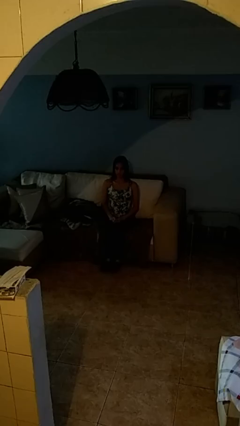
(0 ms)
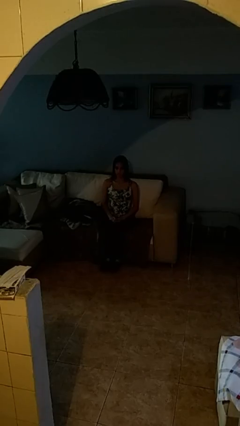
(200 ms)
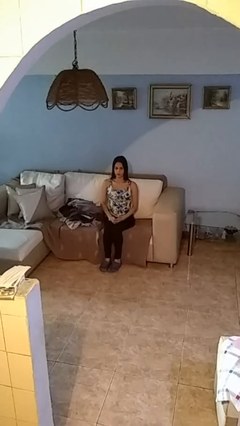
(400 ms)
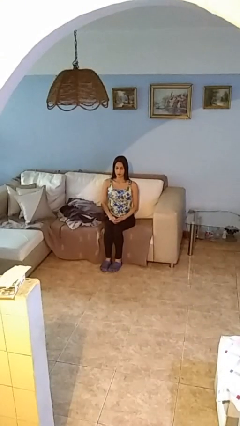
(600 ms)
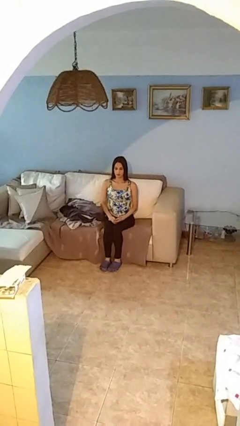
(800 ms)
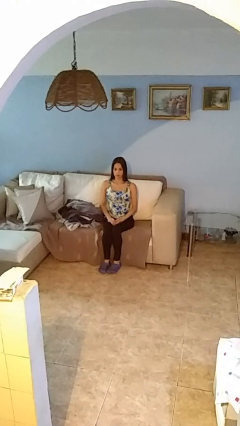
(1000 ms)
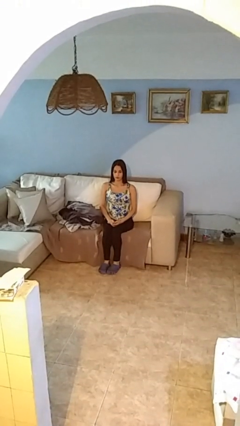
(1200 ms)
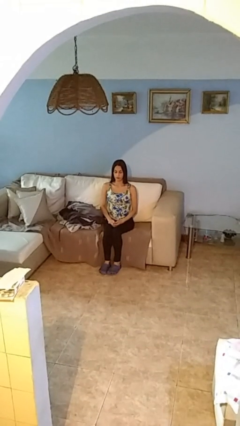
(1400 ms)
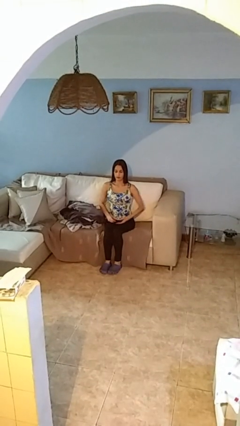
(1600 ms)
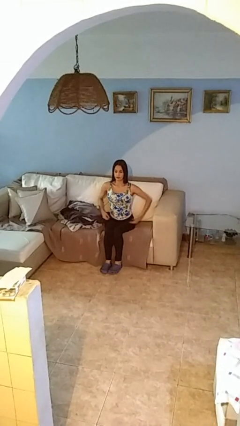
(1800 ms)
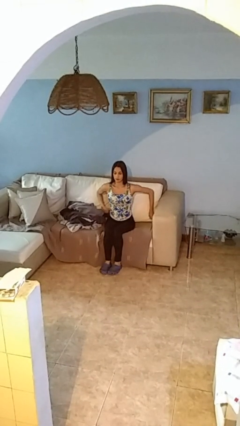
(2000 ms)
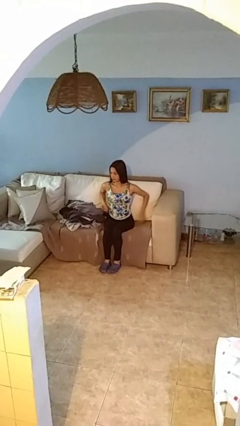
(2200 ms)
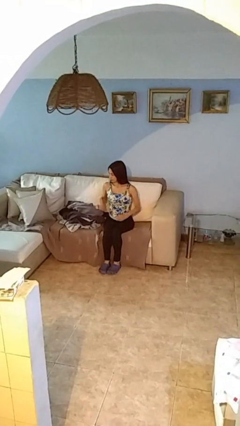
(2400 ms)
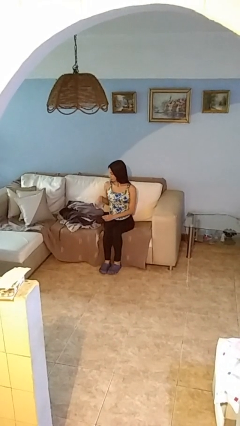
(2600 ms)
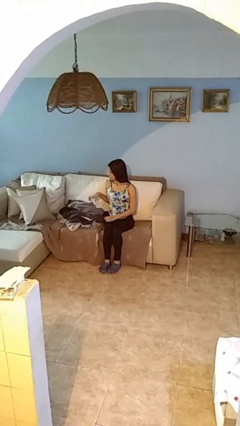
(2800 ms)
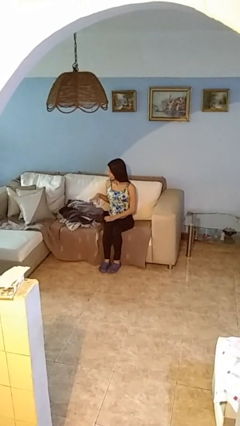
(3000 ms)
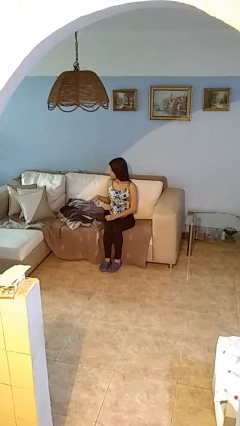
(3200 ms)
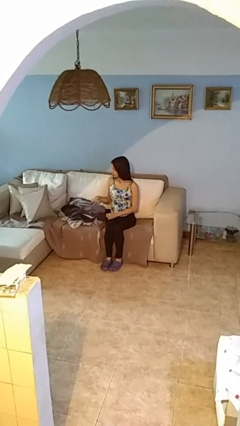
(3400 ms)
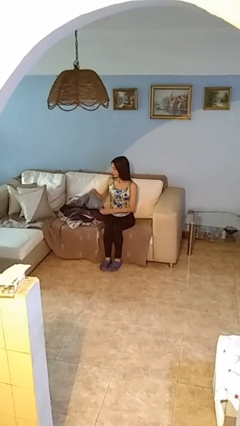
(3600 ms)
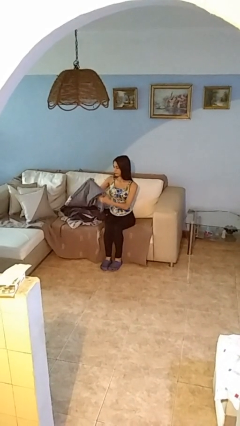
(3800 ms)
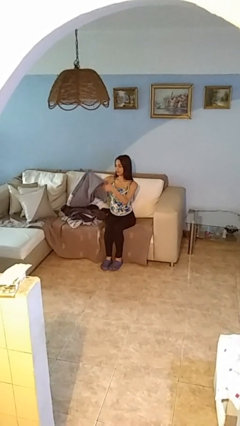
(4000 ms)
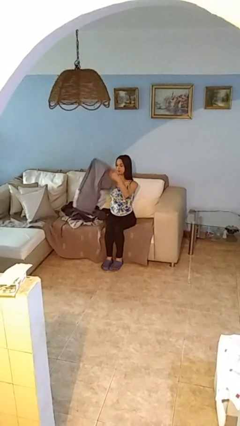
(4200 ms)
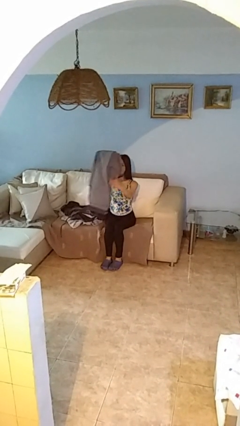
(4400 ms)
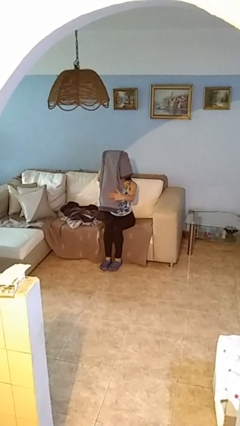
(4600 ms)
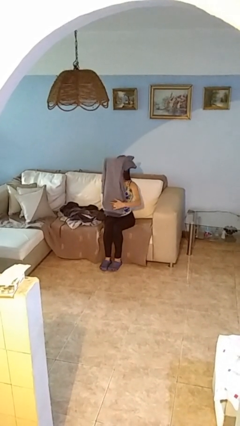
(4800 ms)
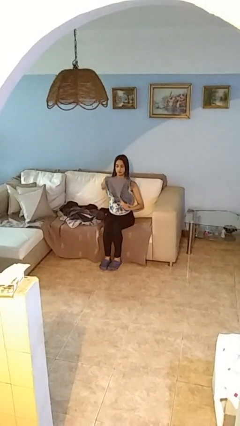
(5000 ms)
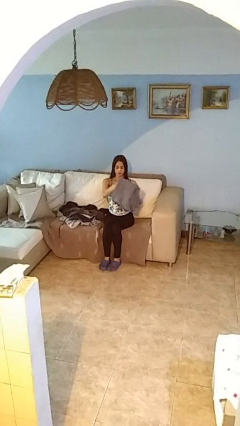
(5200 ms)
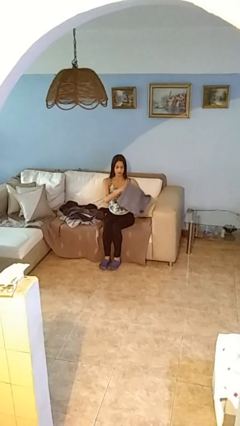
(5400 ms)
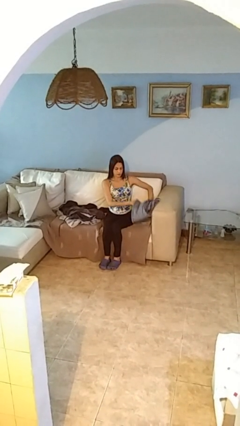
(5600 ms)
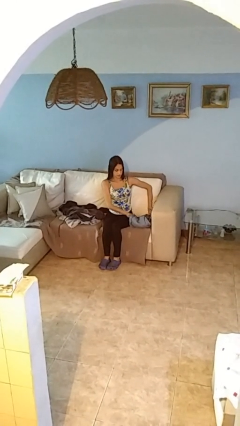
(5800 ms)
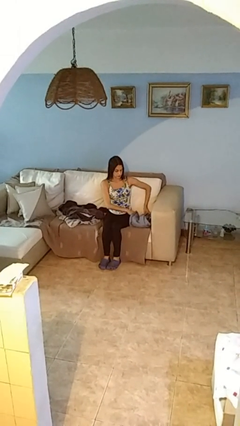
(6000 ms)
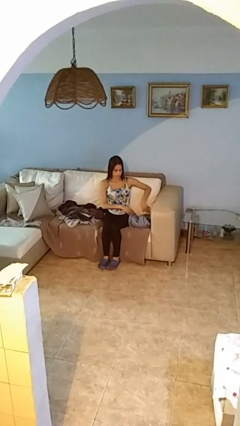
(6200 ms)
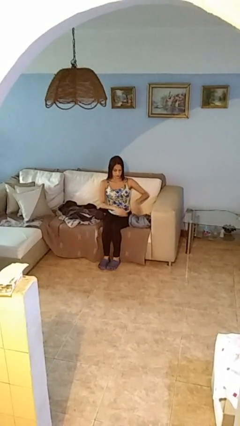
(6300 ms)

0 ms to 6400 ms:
person folds pants

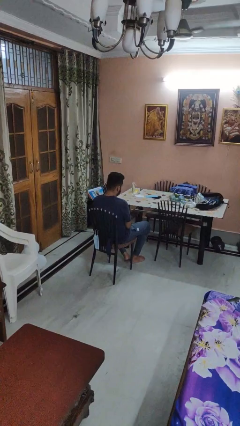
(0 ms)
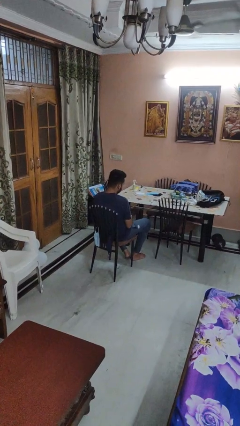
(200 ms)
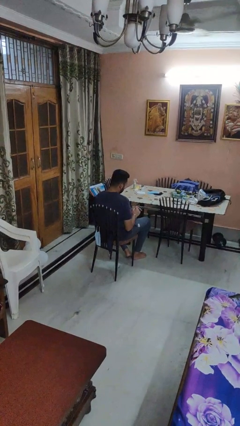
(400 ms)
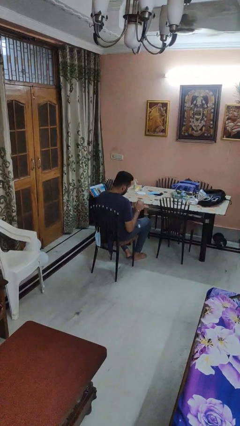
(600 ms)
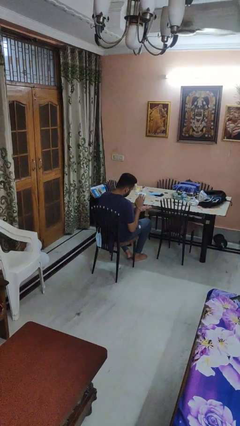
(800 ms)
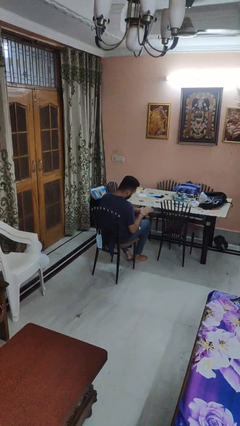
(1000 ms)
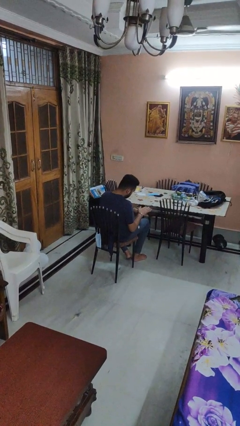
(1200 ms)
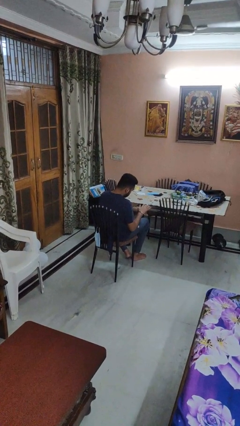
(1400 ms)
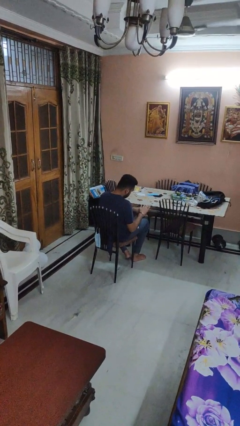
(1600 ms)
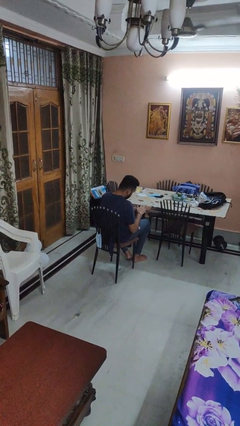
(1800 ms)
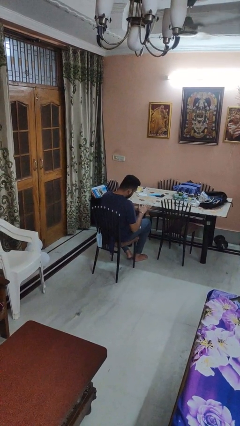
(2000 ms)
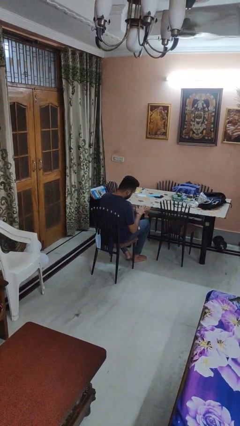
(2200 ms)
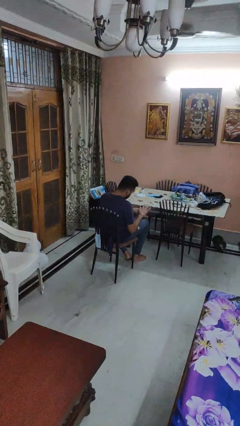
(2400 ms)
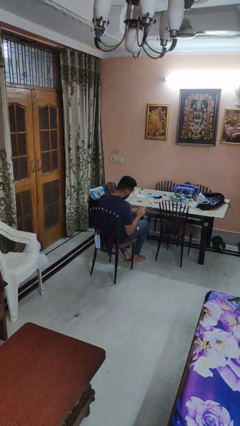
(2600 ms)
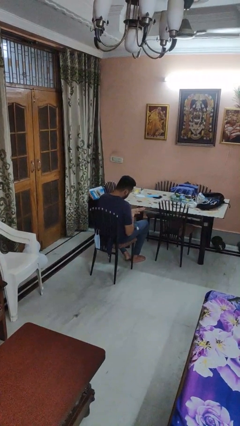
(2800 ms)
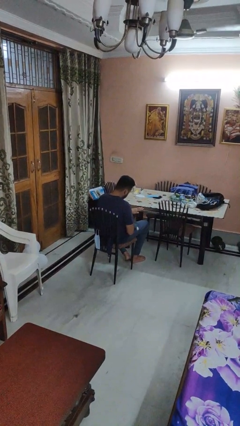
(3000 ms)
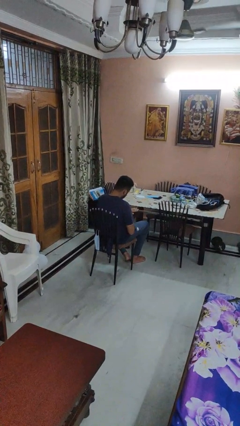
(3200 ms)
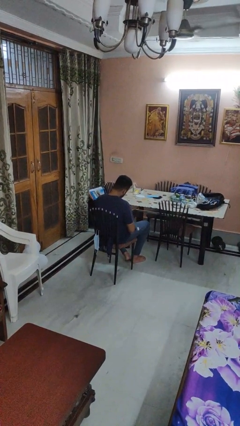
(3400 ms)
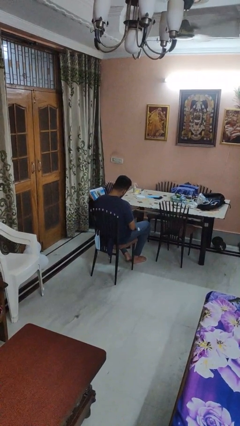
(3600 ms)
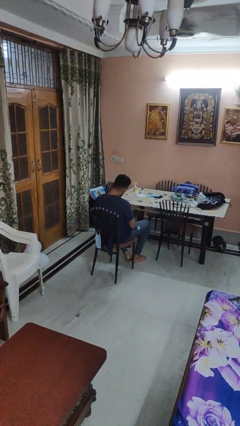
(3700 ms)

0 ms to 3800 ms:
person swats bug

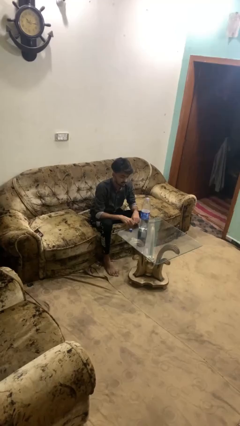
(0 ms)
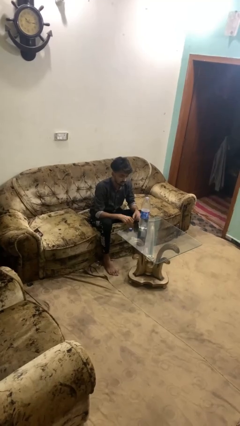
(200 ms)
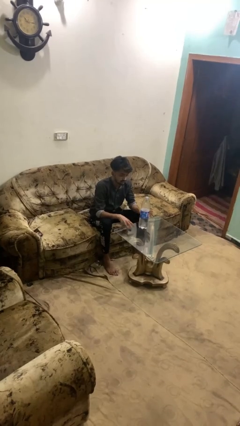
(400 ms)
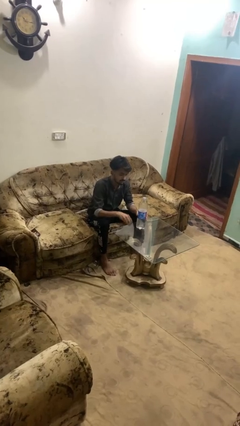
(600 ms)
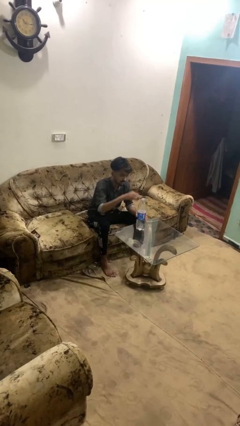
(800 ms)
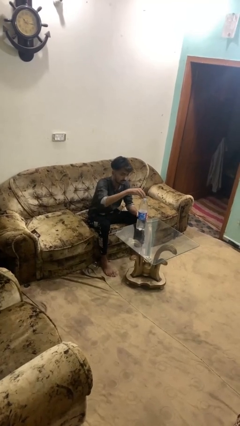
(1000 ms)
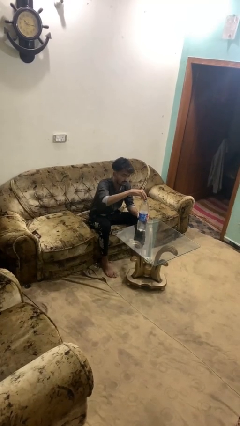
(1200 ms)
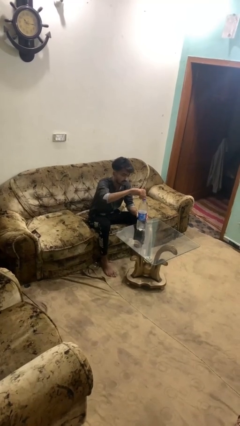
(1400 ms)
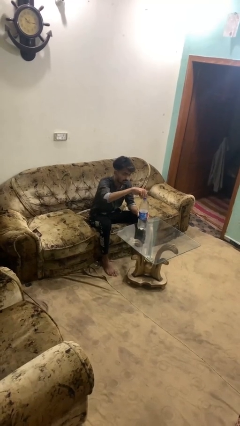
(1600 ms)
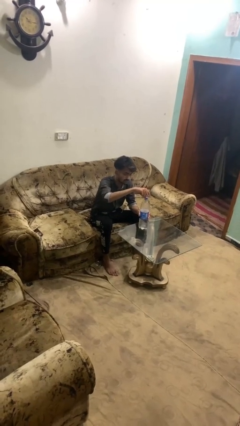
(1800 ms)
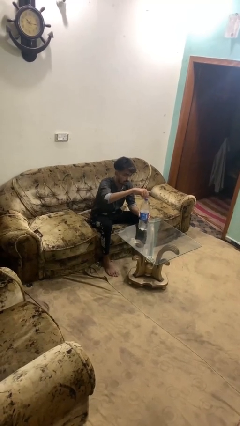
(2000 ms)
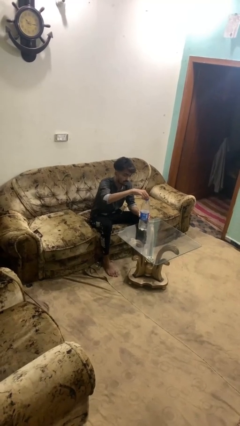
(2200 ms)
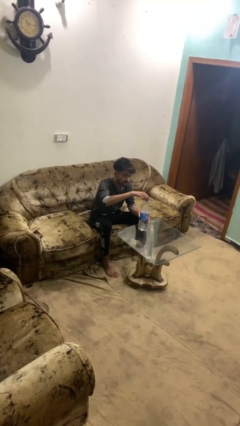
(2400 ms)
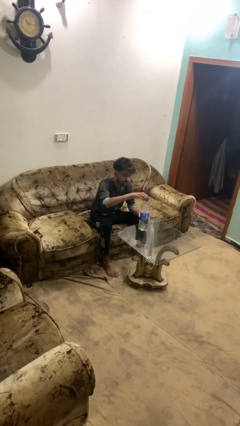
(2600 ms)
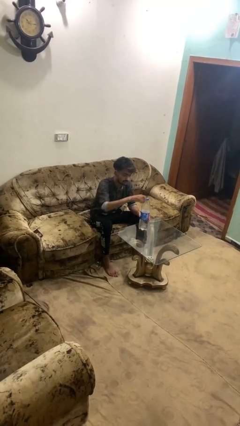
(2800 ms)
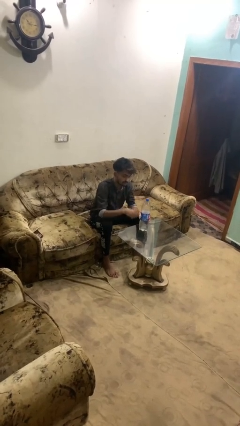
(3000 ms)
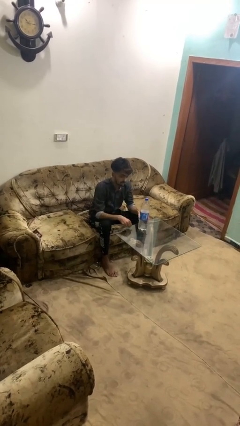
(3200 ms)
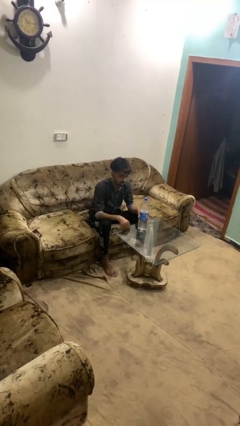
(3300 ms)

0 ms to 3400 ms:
person screws lid to bottle

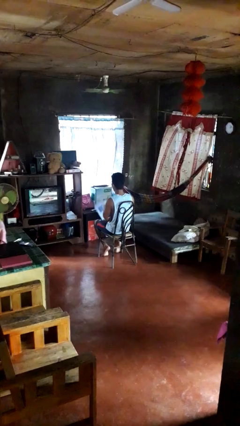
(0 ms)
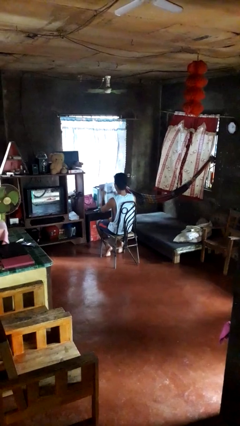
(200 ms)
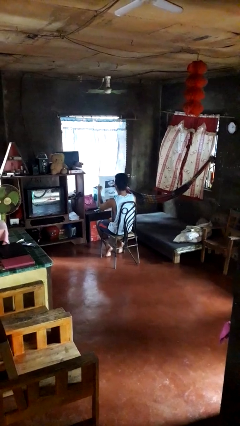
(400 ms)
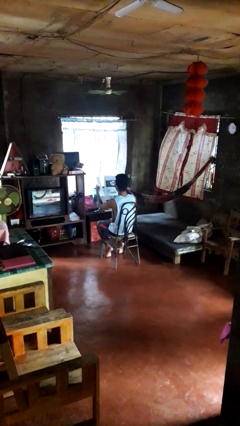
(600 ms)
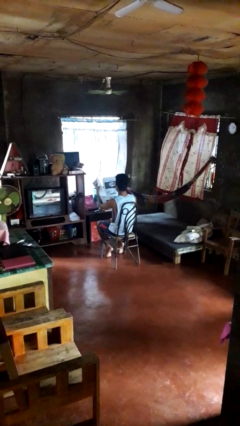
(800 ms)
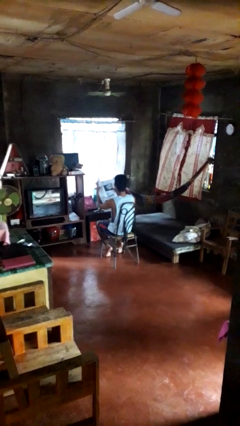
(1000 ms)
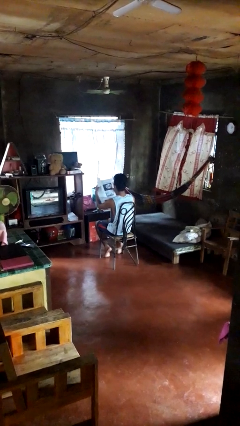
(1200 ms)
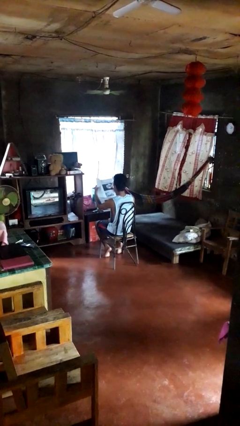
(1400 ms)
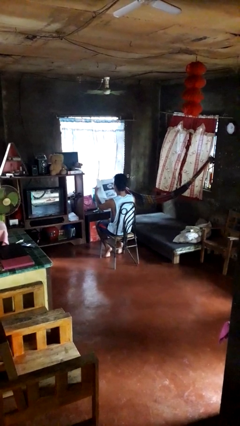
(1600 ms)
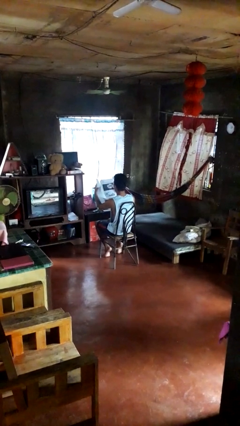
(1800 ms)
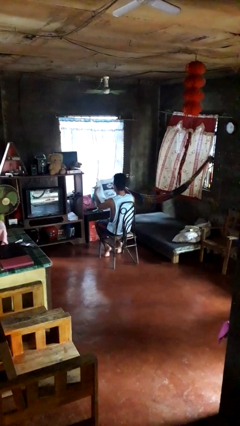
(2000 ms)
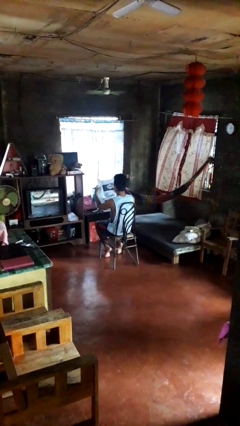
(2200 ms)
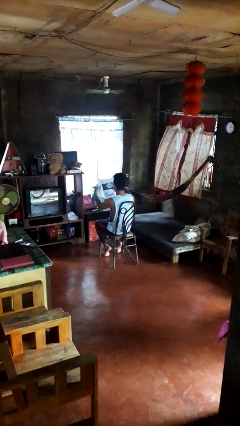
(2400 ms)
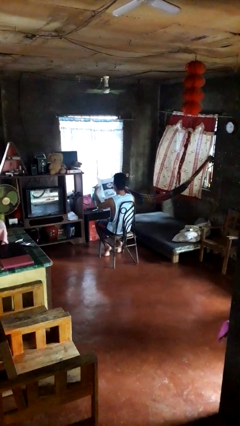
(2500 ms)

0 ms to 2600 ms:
person reads newspaper

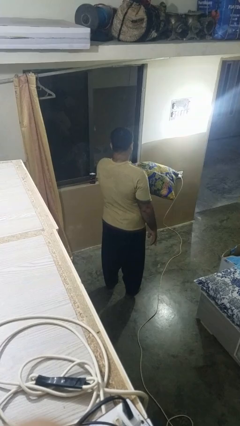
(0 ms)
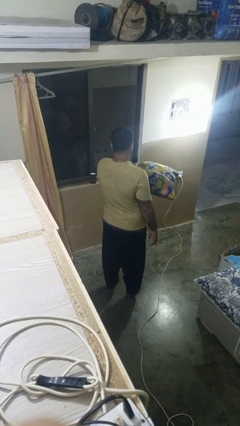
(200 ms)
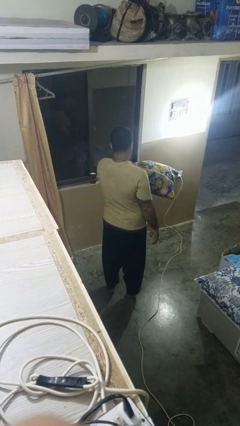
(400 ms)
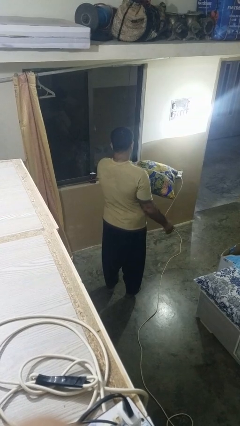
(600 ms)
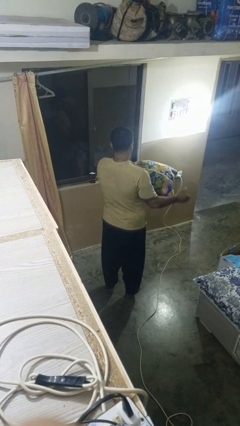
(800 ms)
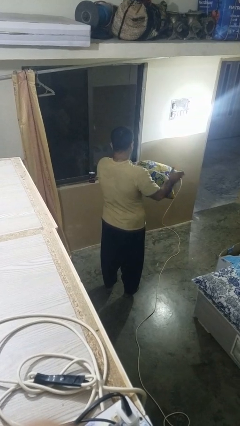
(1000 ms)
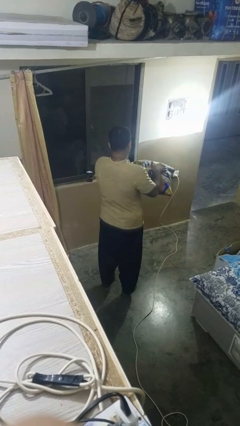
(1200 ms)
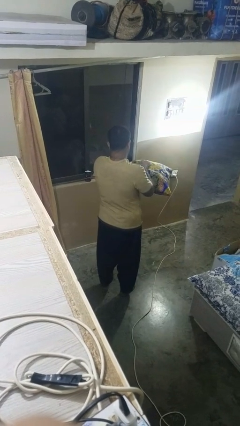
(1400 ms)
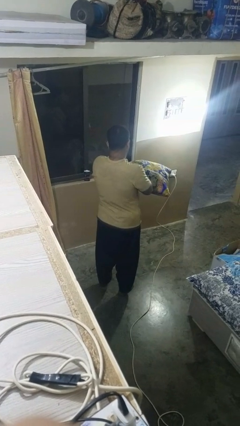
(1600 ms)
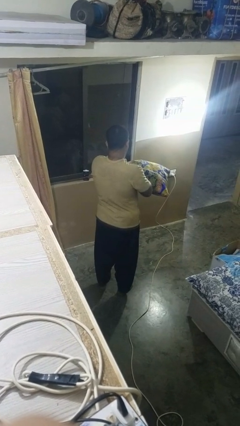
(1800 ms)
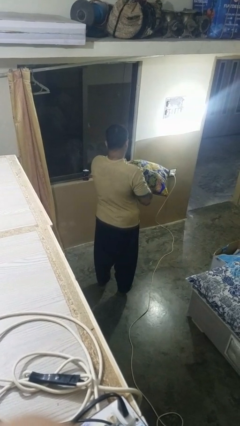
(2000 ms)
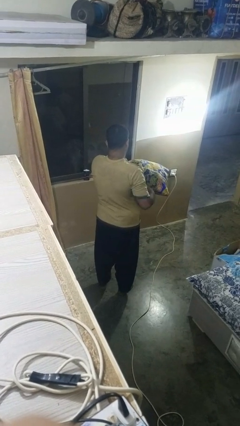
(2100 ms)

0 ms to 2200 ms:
person waves hand over object
